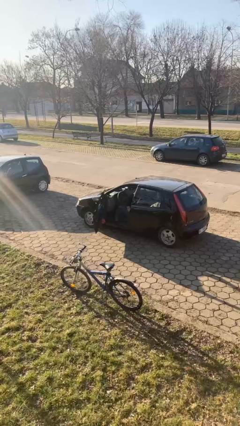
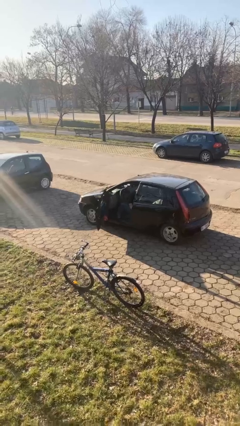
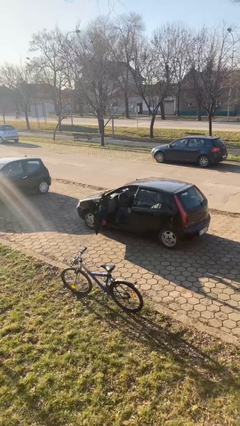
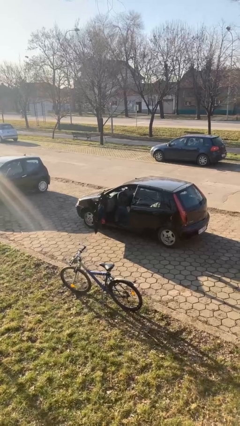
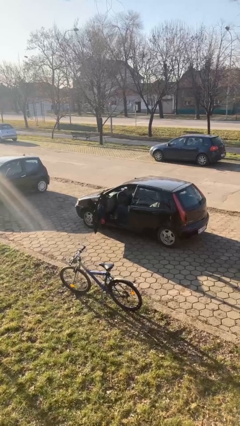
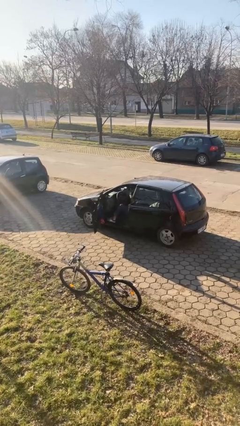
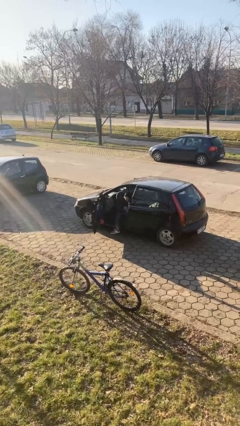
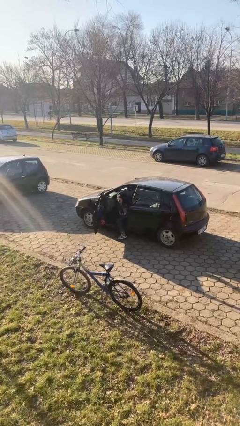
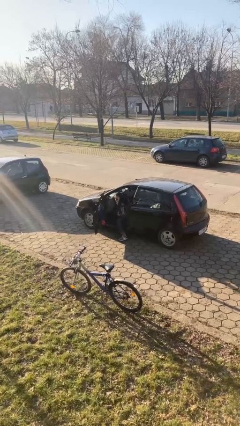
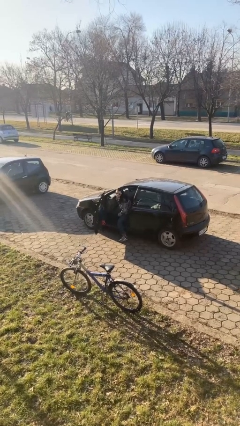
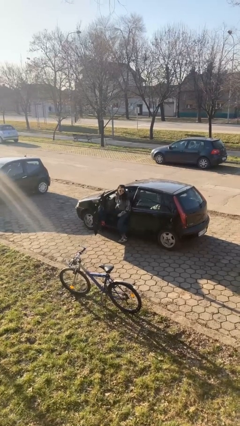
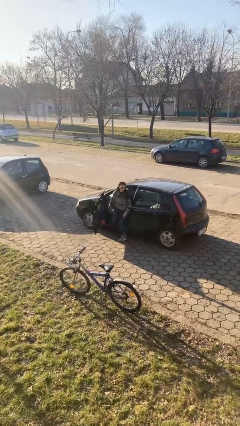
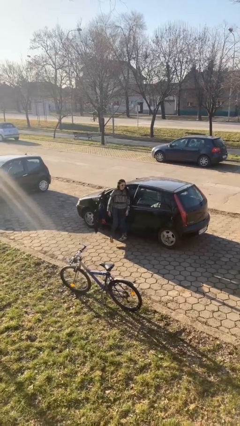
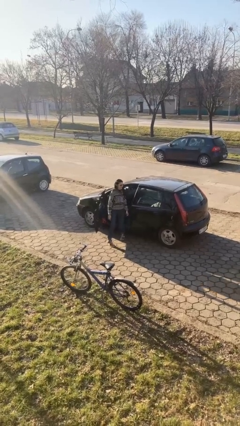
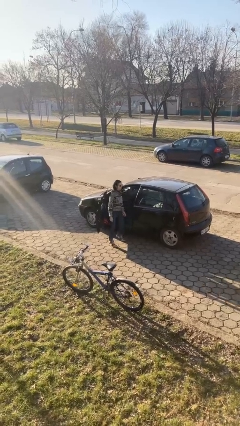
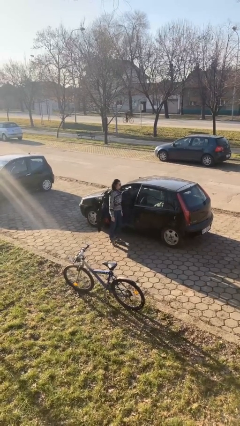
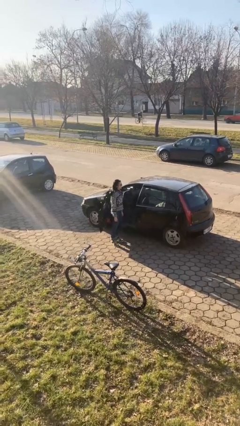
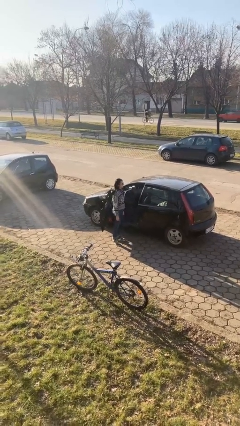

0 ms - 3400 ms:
person exits car

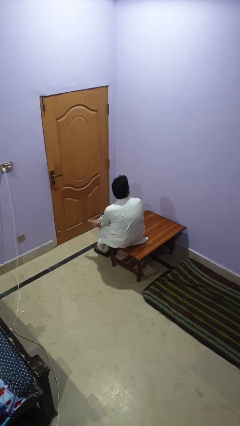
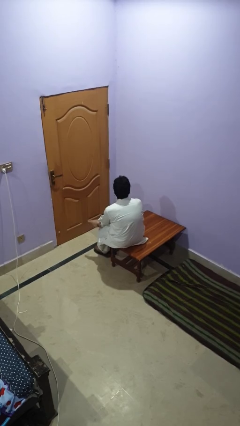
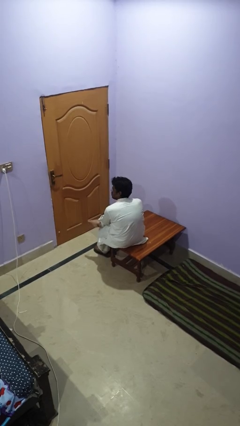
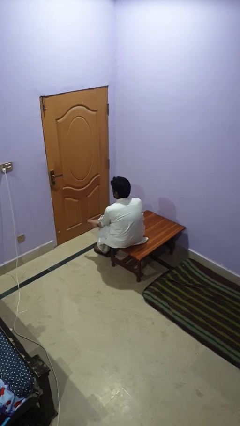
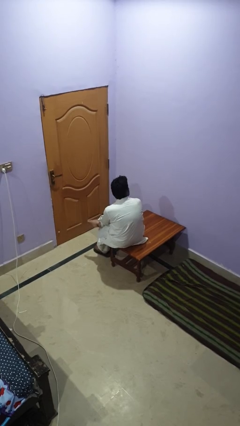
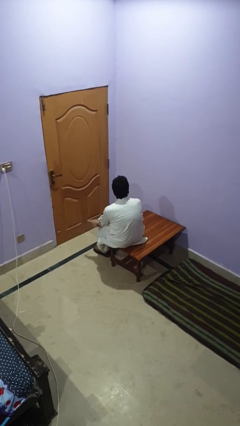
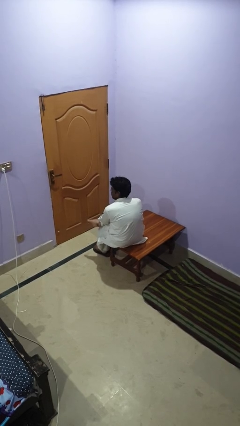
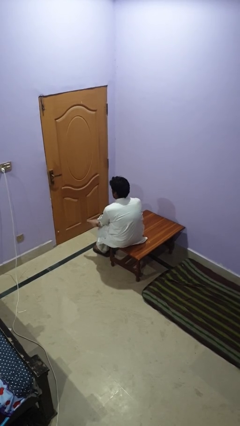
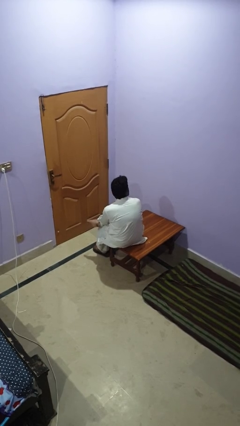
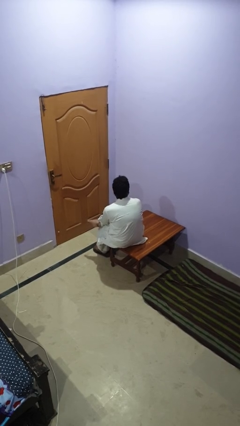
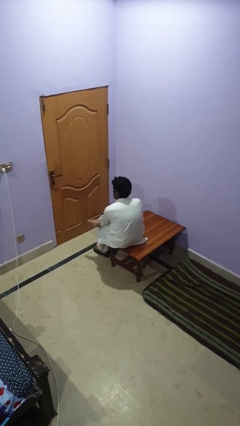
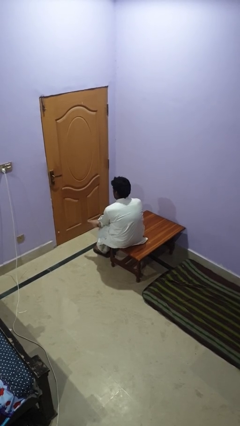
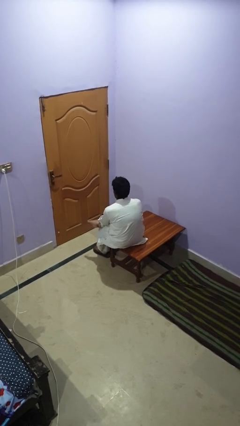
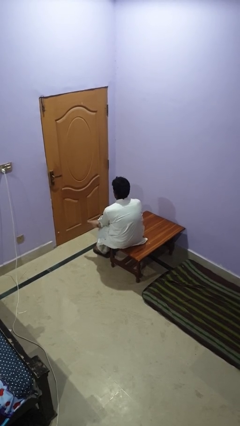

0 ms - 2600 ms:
person shakes head

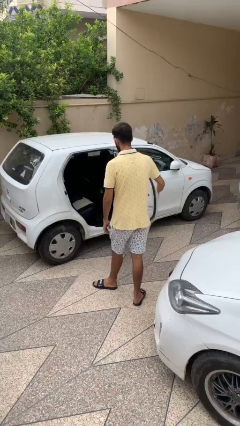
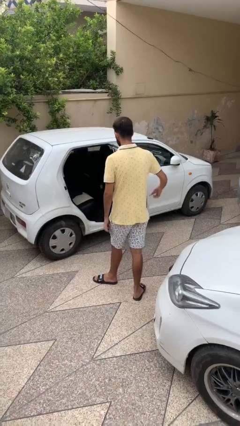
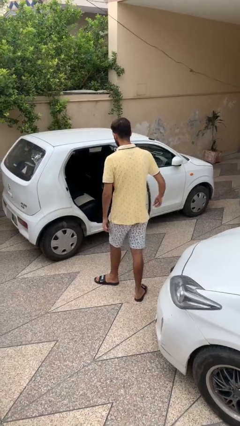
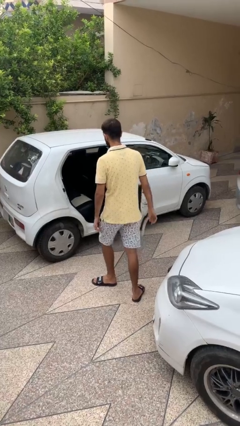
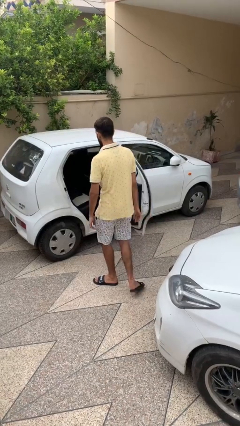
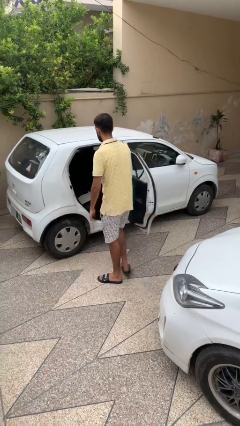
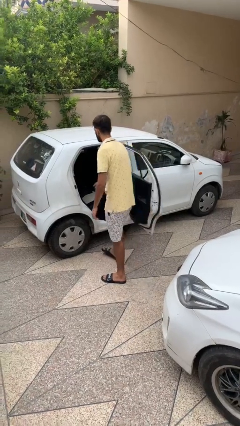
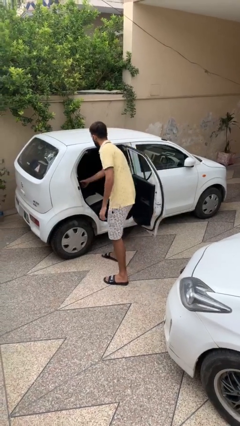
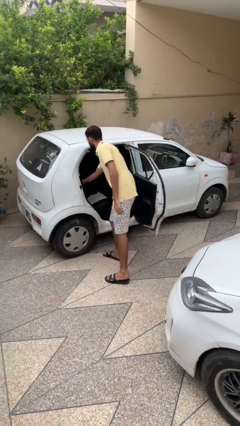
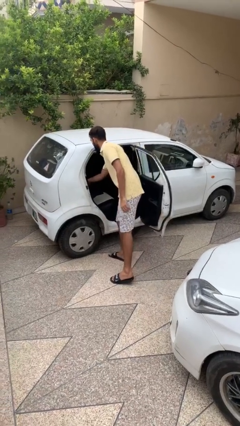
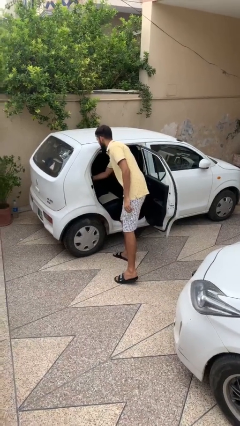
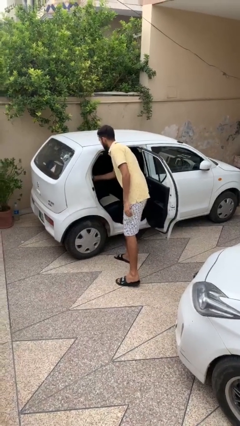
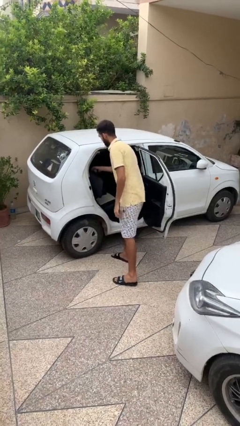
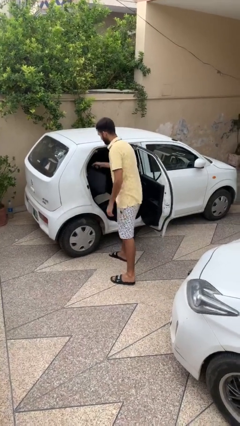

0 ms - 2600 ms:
person unloads car

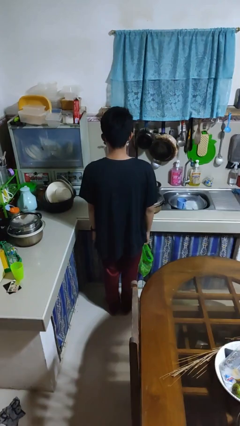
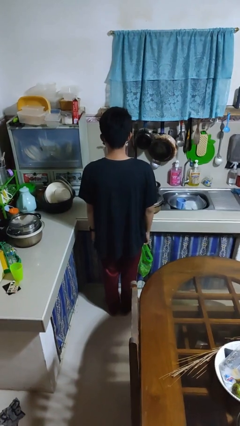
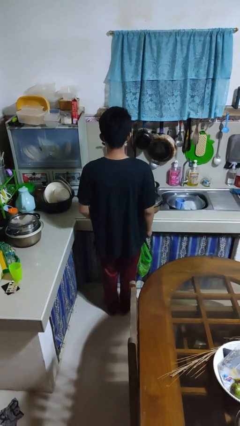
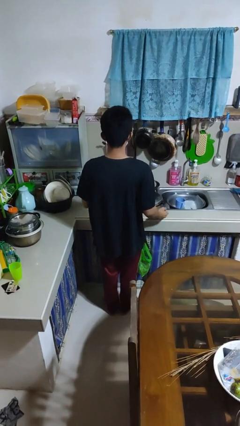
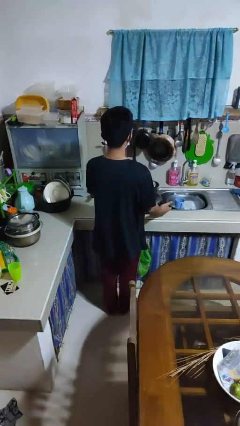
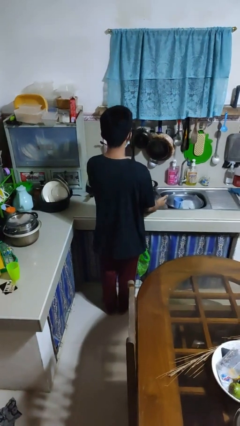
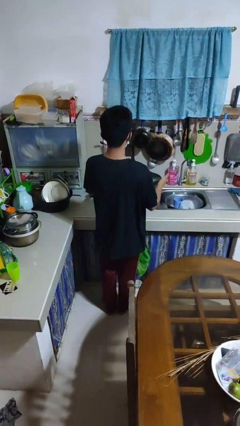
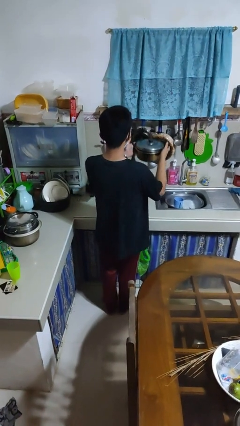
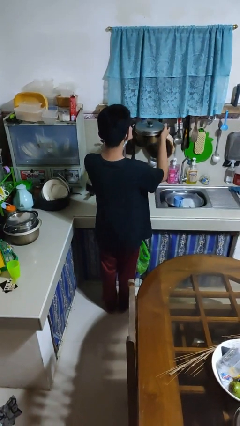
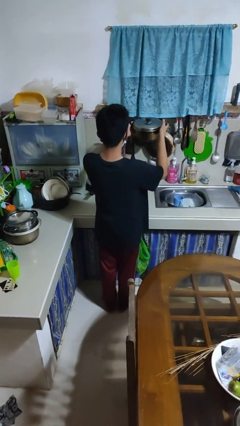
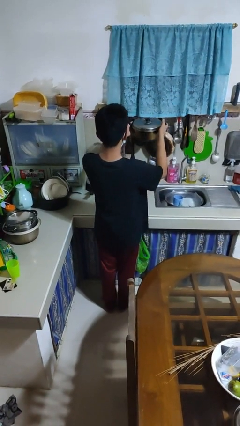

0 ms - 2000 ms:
person picks up object from countertop

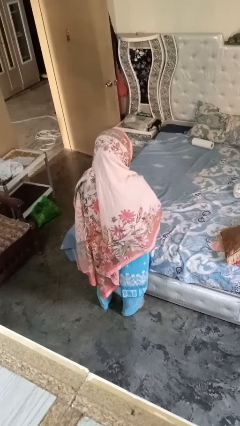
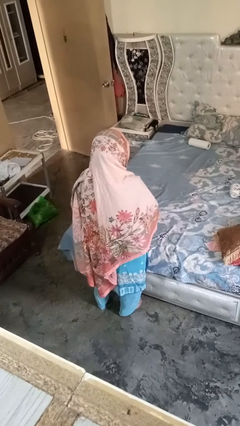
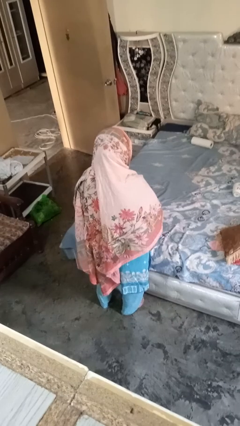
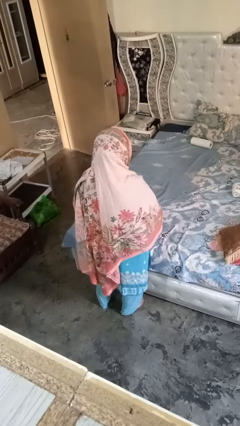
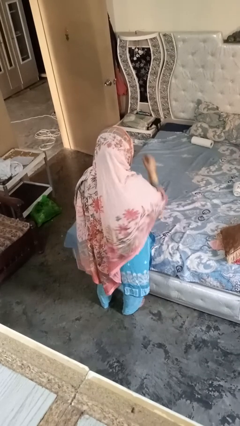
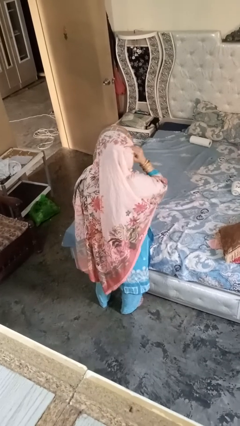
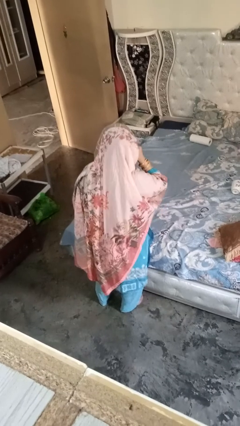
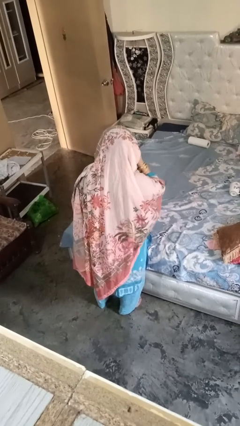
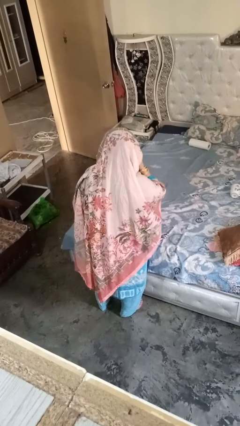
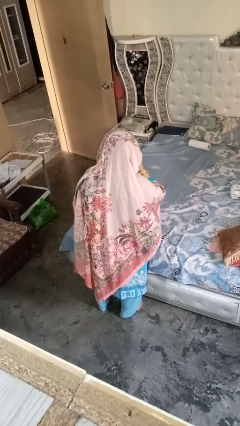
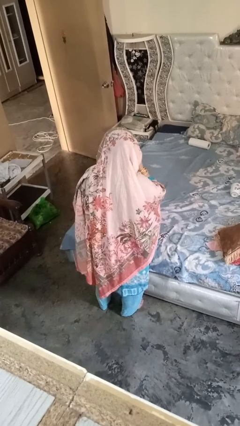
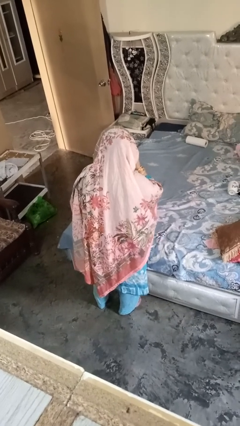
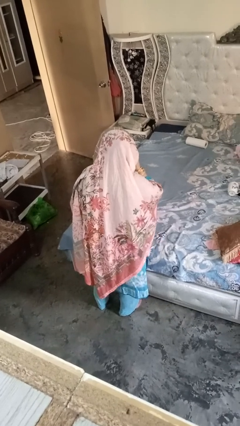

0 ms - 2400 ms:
person gestures listen closely

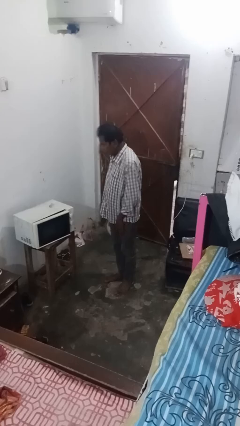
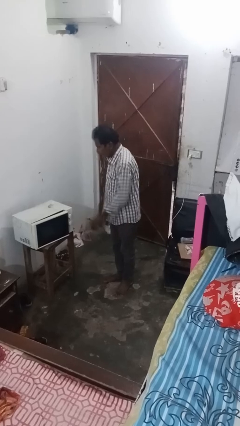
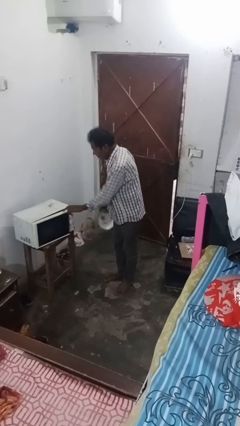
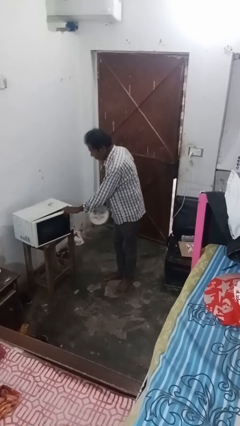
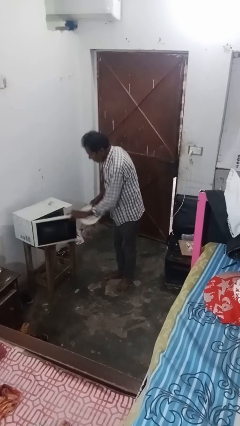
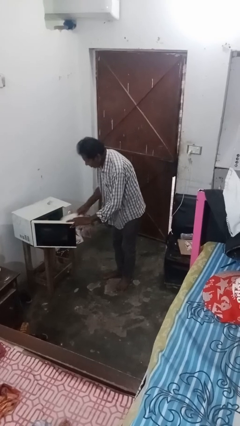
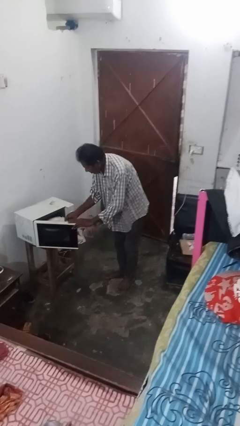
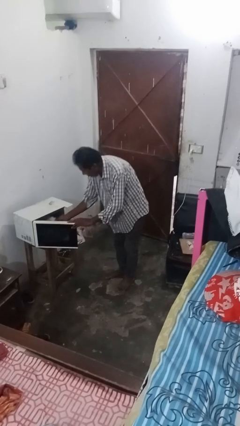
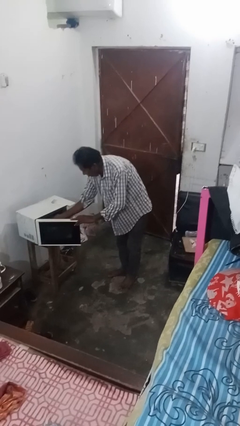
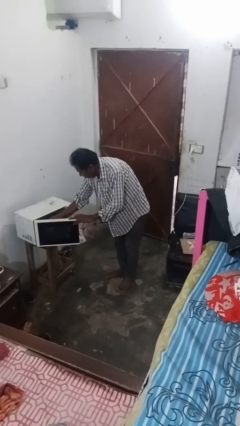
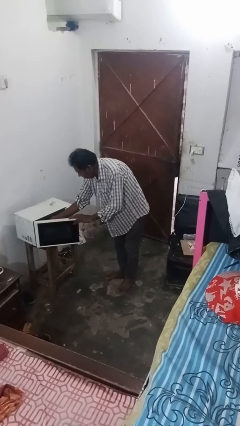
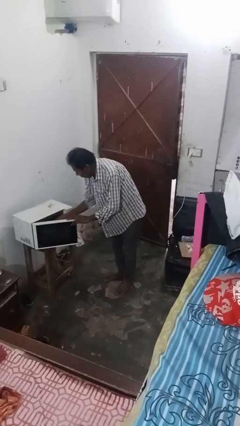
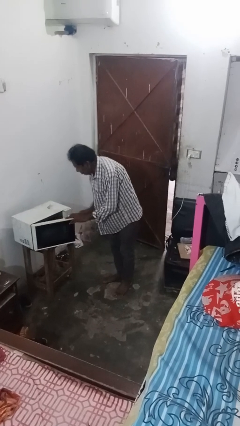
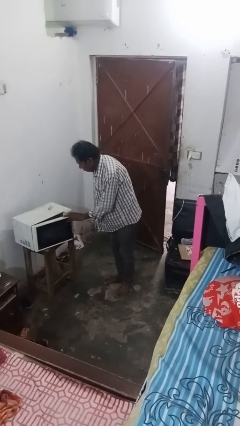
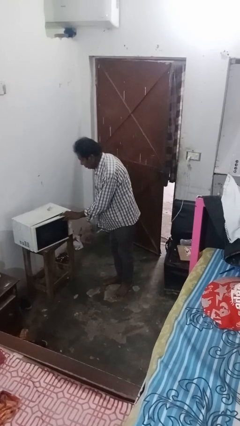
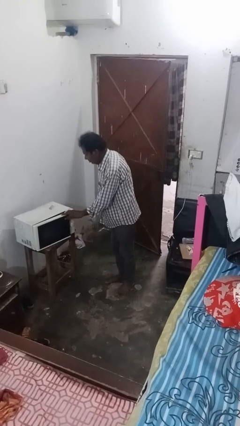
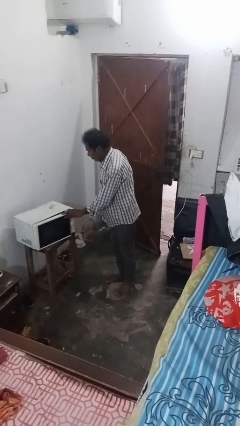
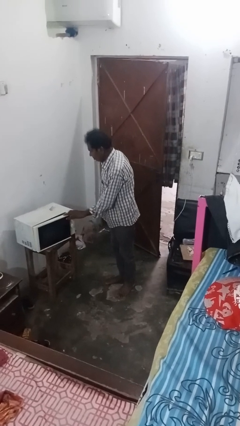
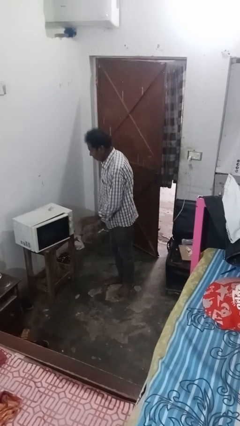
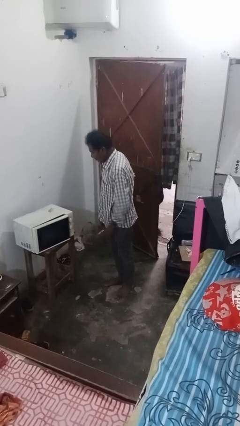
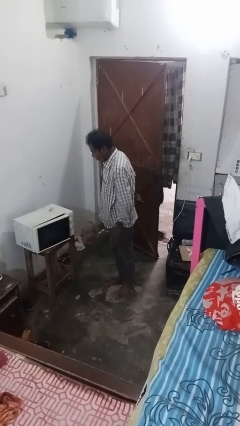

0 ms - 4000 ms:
person puts object into microwave

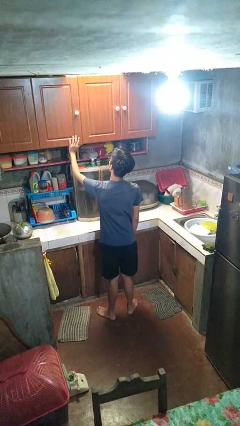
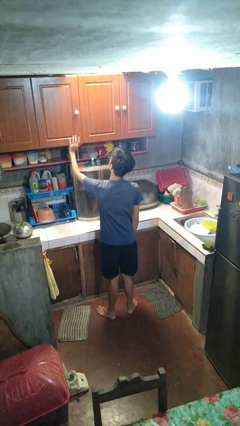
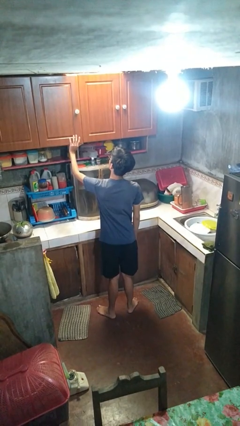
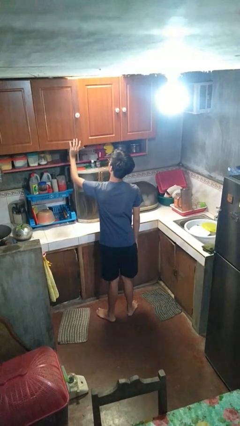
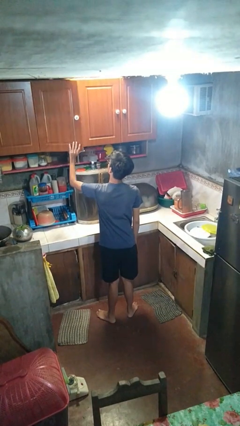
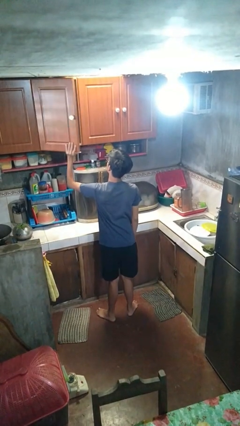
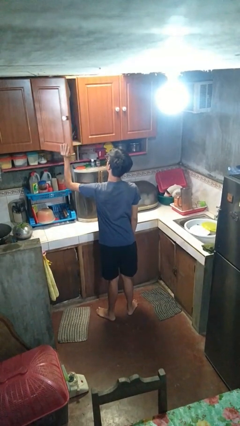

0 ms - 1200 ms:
person opens cabinet
